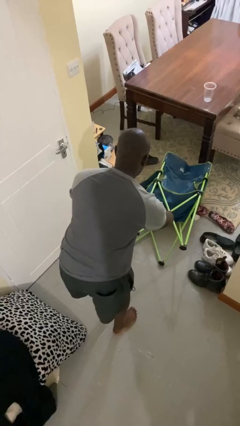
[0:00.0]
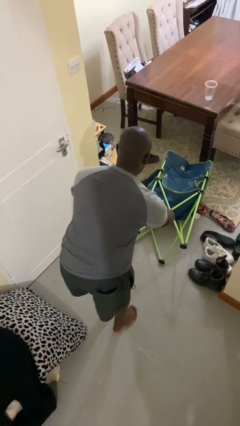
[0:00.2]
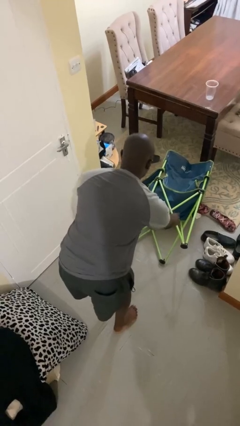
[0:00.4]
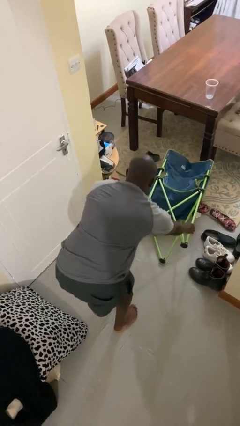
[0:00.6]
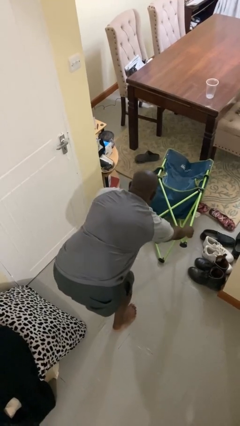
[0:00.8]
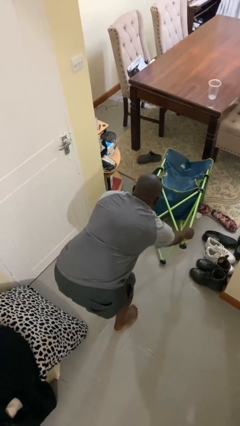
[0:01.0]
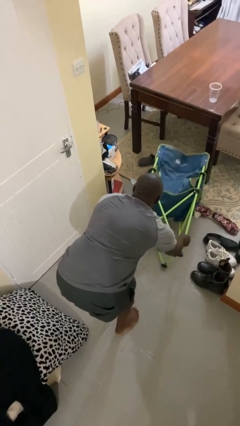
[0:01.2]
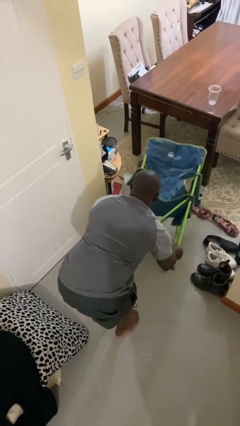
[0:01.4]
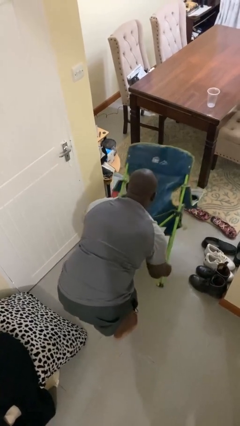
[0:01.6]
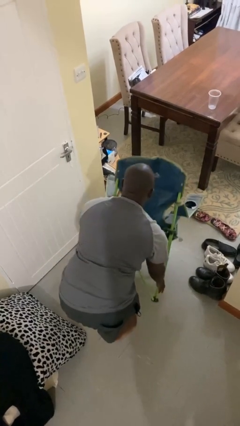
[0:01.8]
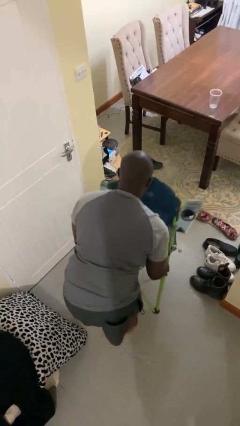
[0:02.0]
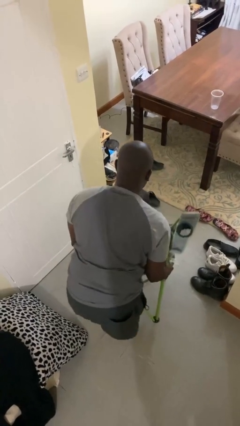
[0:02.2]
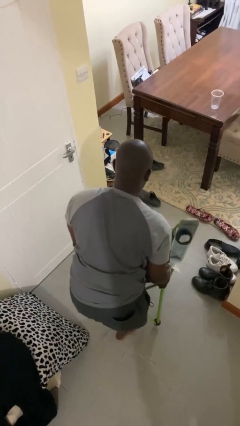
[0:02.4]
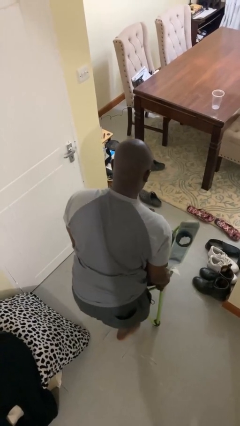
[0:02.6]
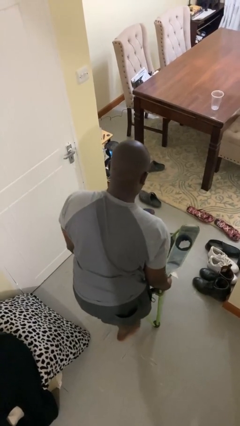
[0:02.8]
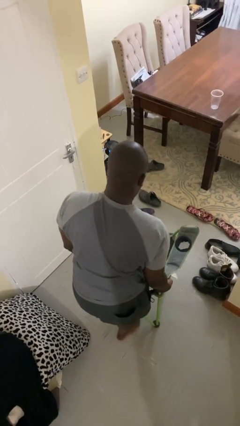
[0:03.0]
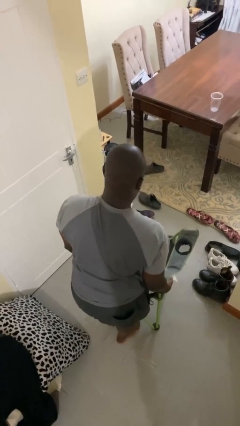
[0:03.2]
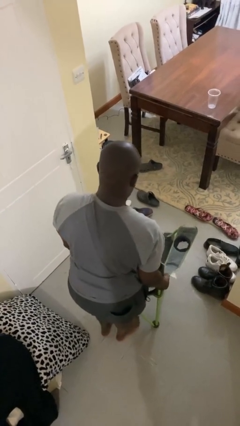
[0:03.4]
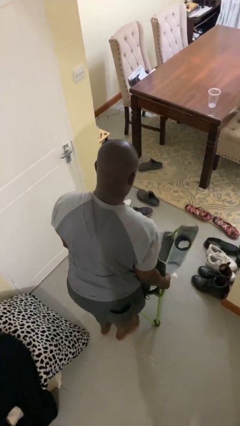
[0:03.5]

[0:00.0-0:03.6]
person sets upright furniture

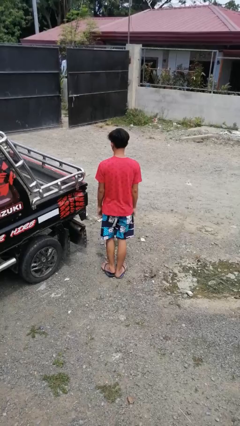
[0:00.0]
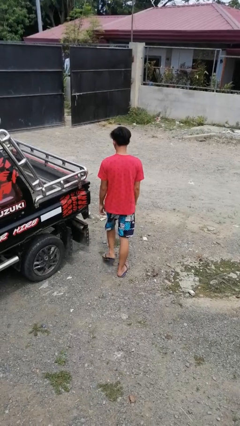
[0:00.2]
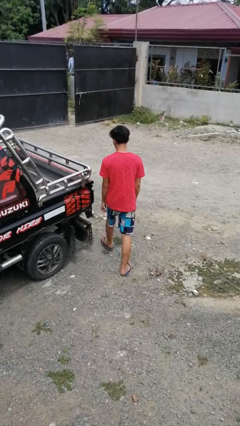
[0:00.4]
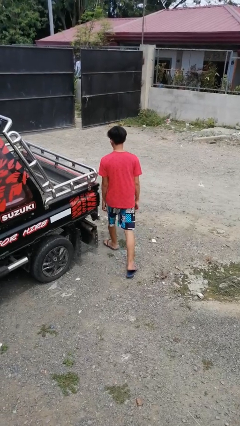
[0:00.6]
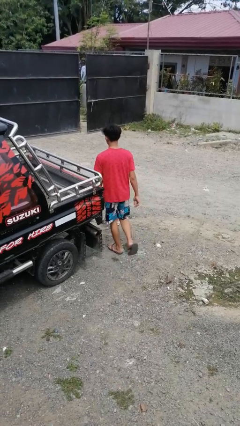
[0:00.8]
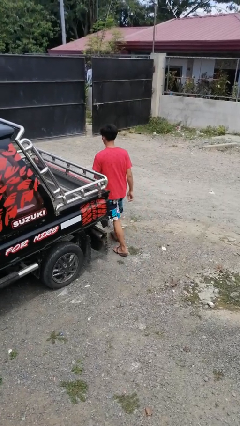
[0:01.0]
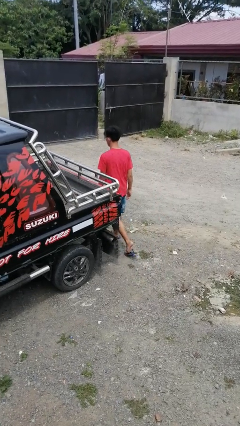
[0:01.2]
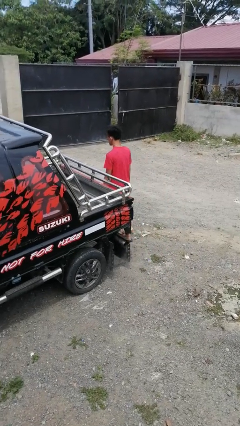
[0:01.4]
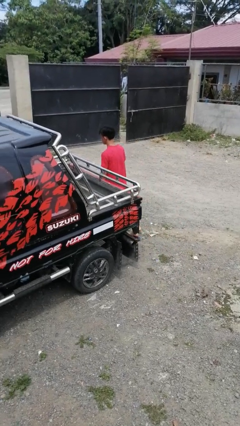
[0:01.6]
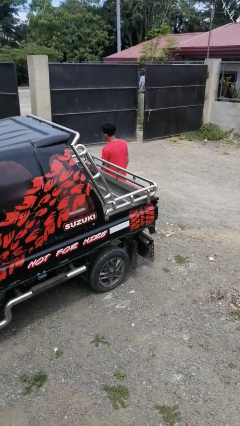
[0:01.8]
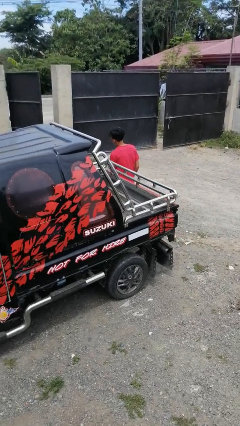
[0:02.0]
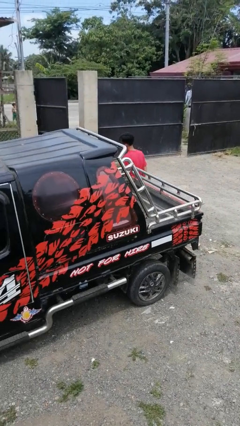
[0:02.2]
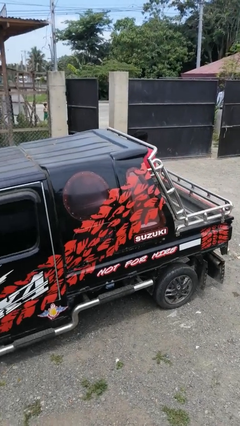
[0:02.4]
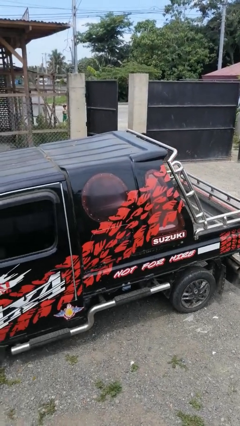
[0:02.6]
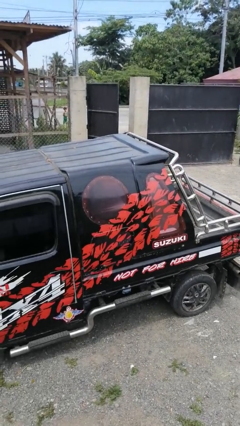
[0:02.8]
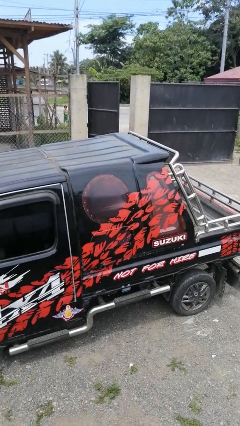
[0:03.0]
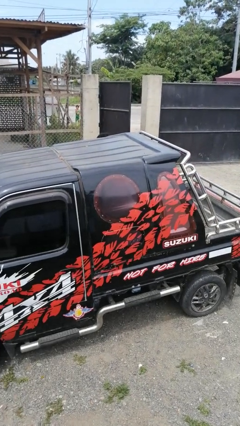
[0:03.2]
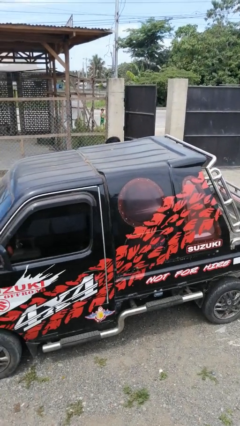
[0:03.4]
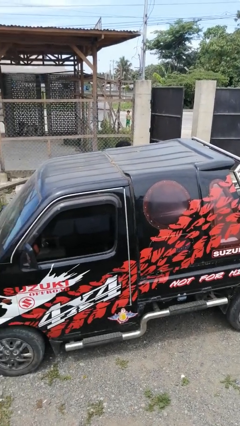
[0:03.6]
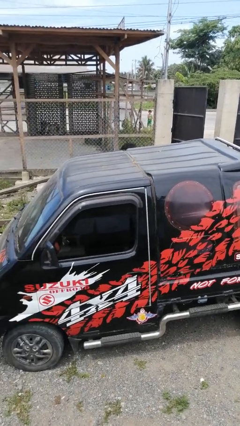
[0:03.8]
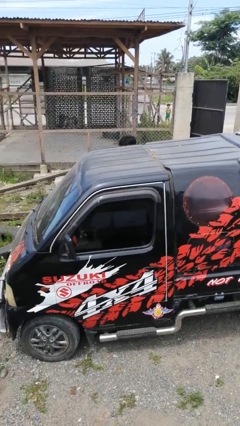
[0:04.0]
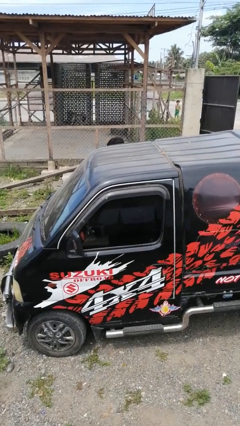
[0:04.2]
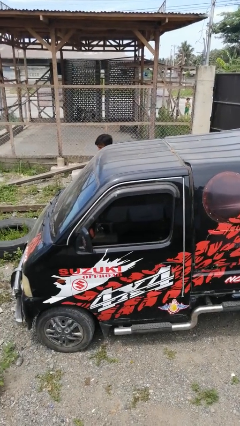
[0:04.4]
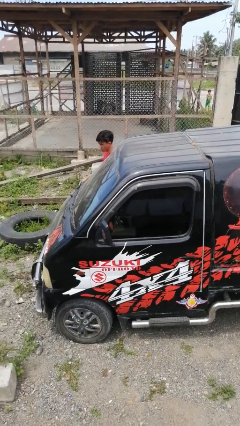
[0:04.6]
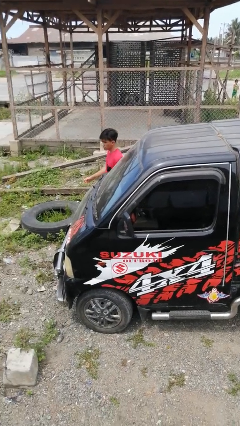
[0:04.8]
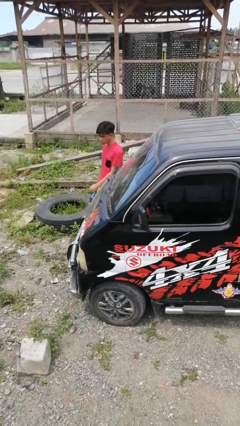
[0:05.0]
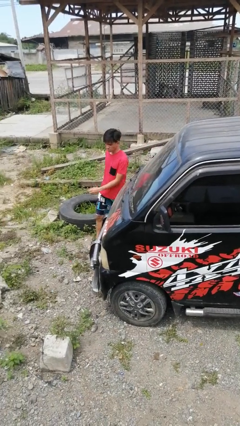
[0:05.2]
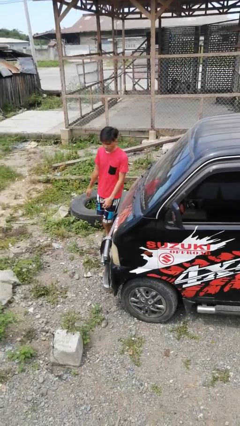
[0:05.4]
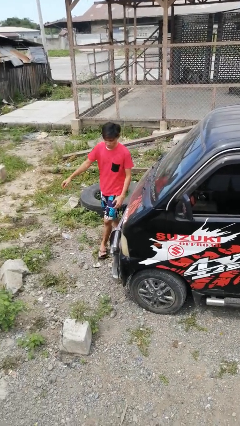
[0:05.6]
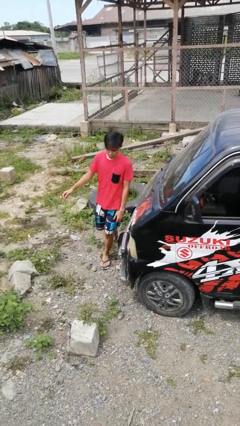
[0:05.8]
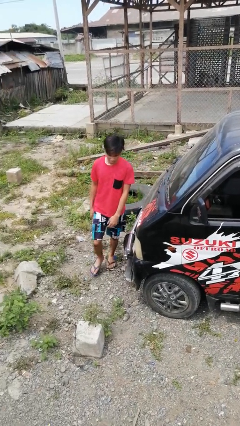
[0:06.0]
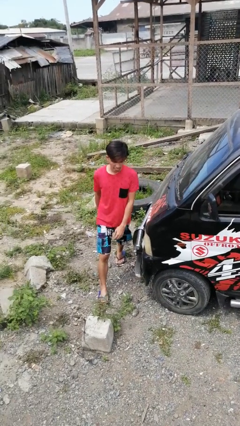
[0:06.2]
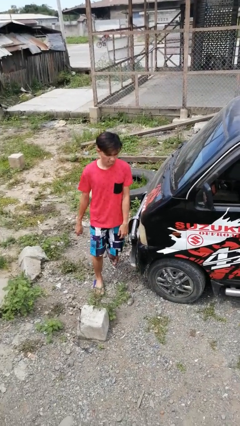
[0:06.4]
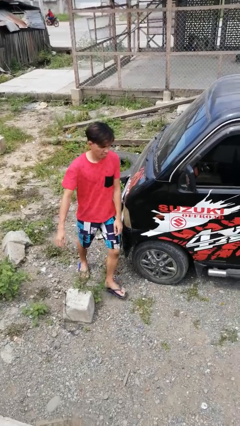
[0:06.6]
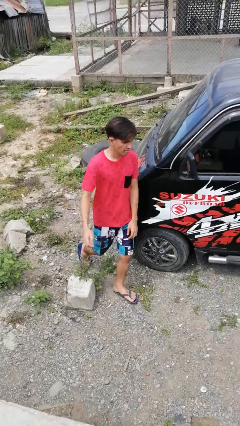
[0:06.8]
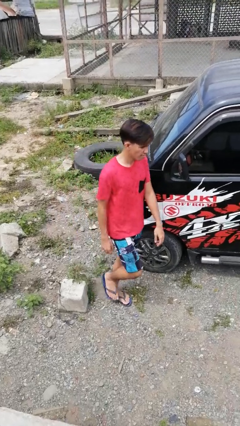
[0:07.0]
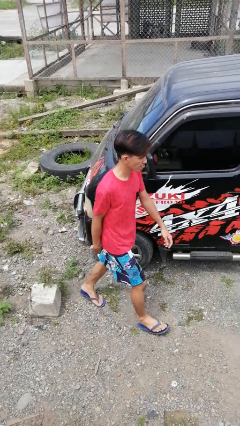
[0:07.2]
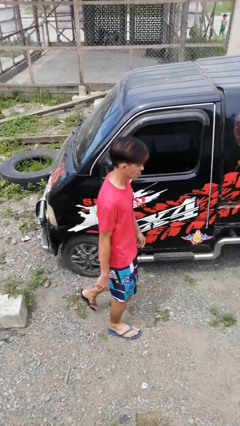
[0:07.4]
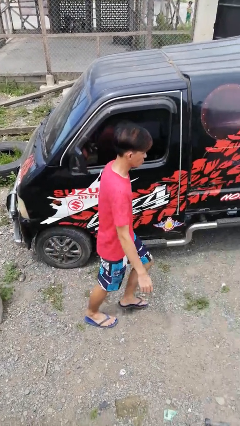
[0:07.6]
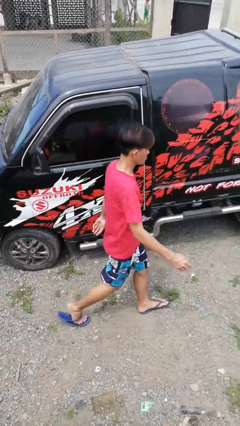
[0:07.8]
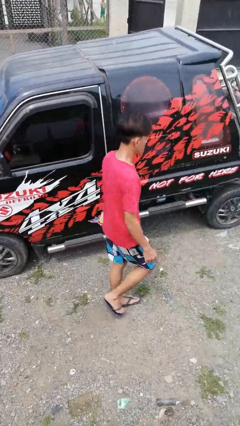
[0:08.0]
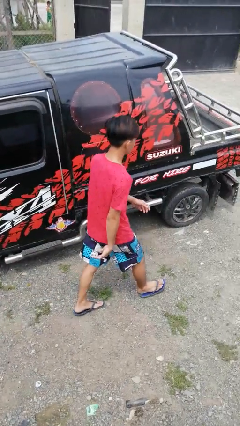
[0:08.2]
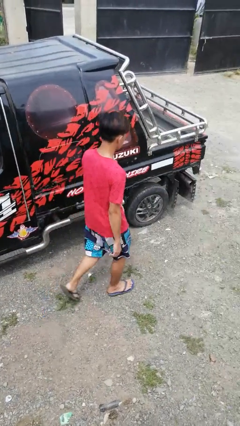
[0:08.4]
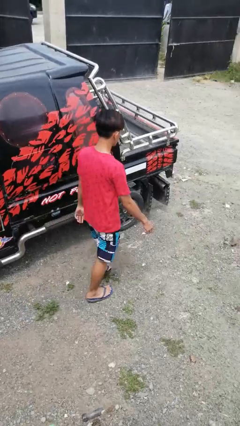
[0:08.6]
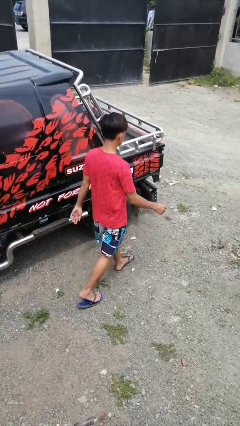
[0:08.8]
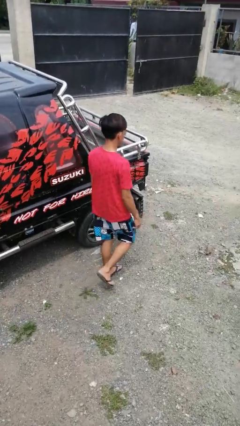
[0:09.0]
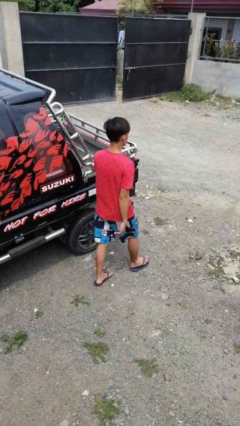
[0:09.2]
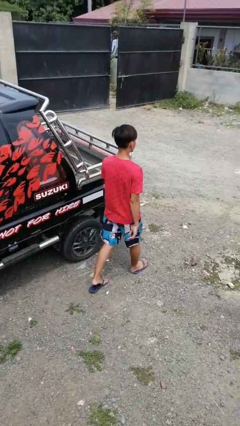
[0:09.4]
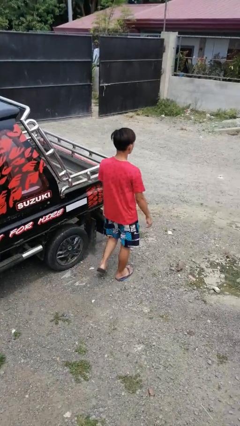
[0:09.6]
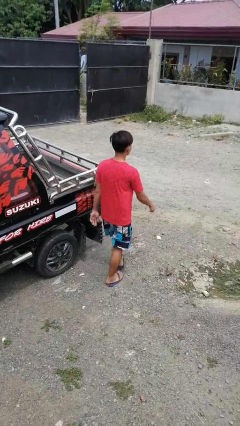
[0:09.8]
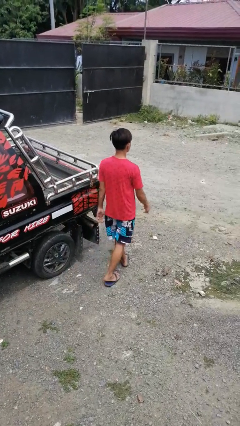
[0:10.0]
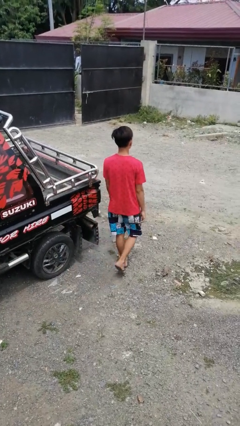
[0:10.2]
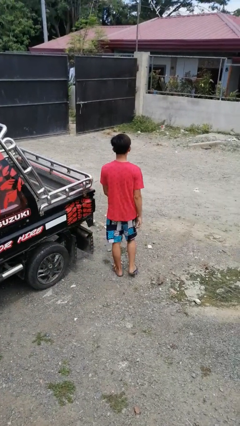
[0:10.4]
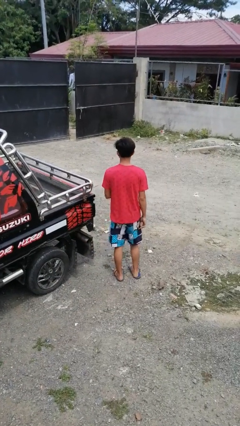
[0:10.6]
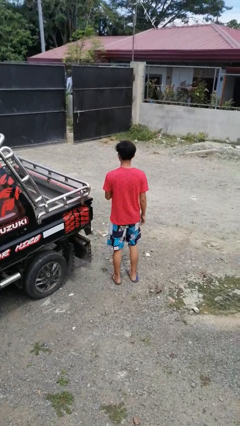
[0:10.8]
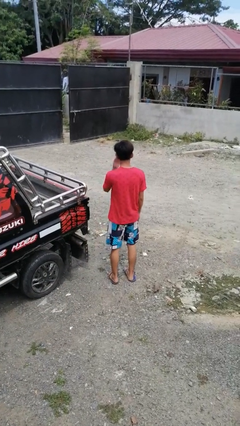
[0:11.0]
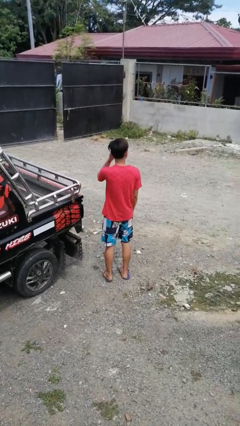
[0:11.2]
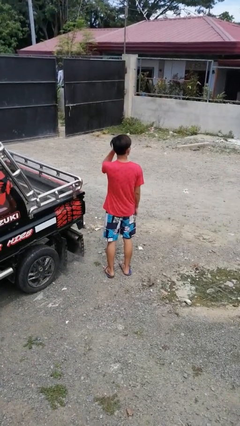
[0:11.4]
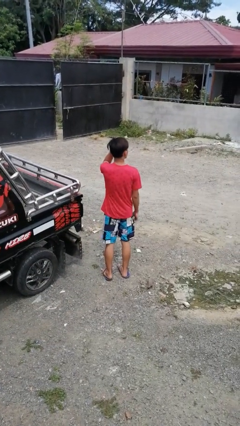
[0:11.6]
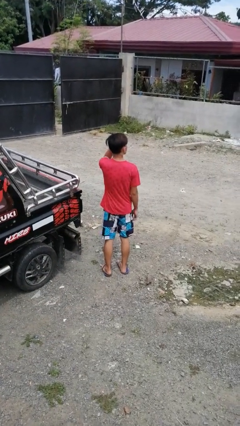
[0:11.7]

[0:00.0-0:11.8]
person walks around car

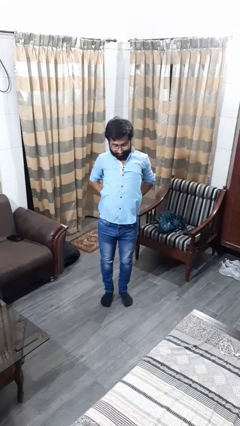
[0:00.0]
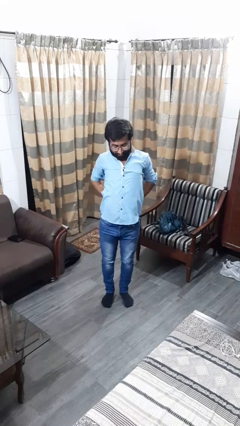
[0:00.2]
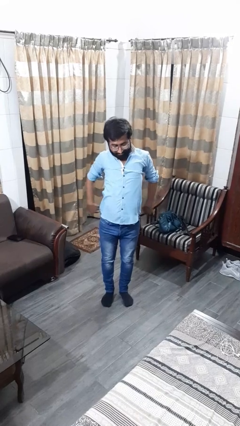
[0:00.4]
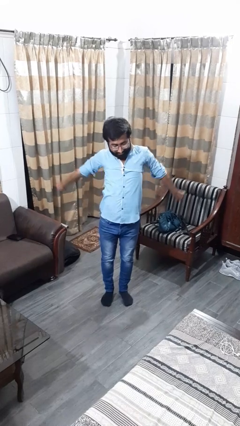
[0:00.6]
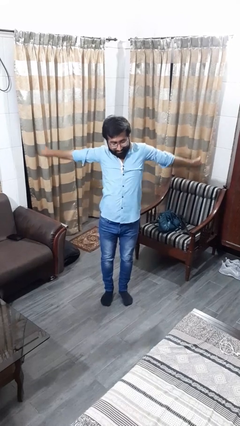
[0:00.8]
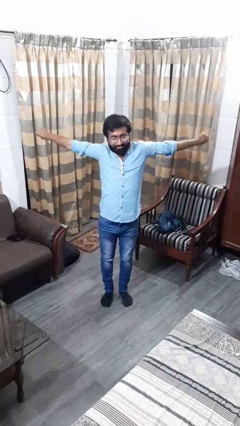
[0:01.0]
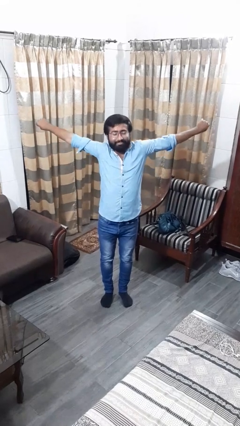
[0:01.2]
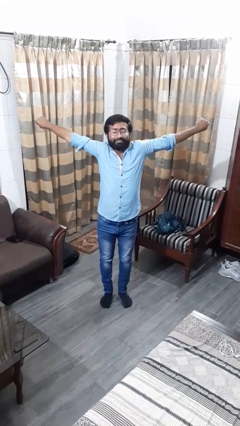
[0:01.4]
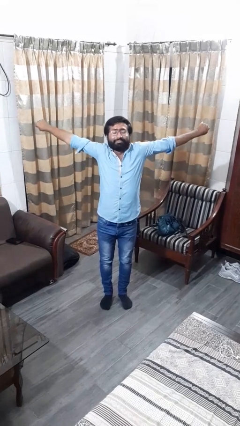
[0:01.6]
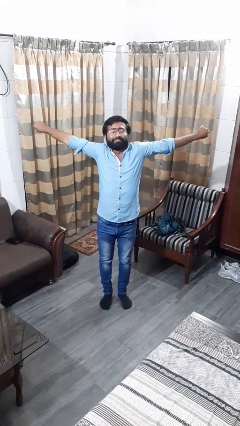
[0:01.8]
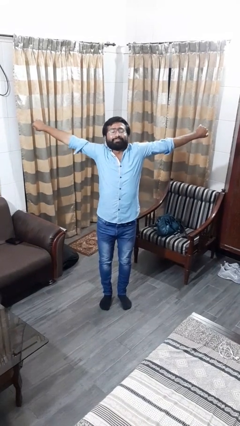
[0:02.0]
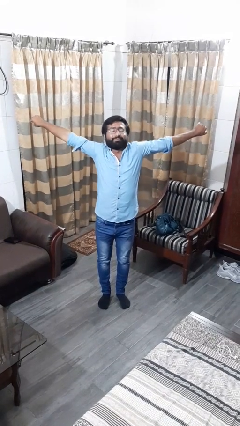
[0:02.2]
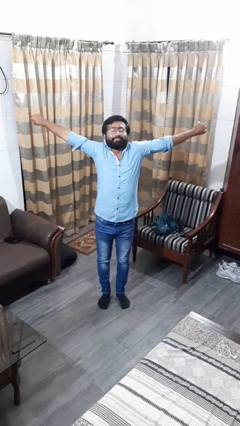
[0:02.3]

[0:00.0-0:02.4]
person stretches arms to side
